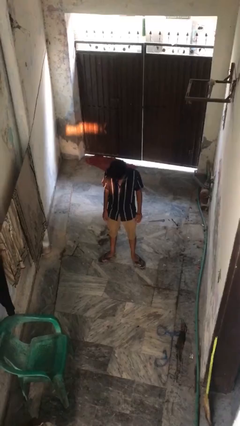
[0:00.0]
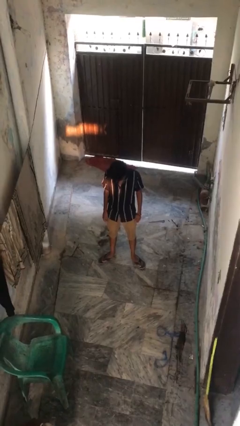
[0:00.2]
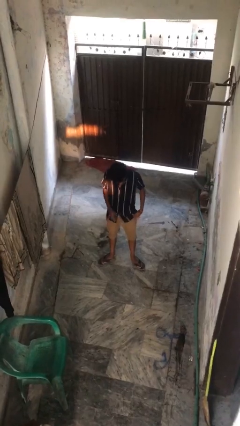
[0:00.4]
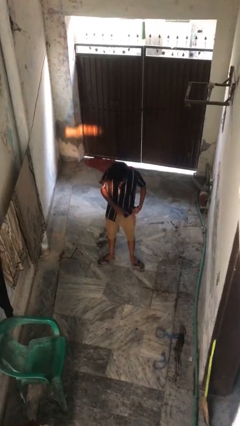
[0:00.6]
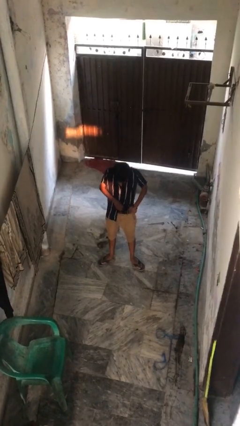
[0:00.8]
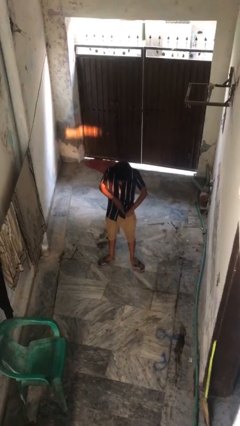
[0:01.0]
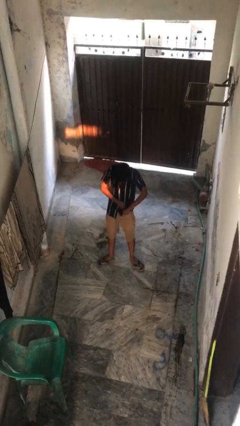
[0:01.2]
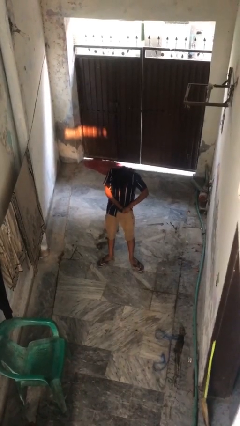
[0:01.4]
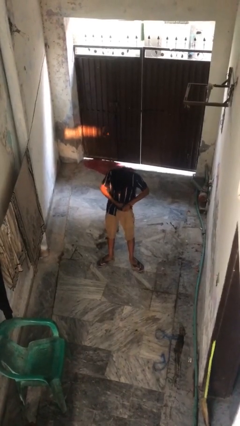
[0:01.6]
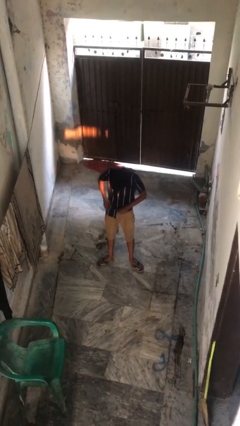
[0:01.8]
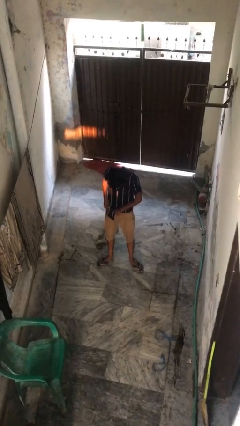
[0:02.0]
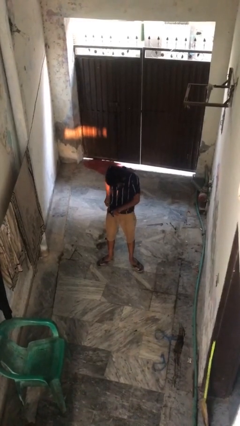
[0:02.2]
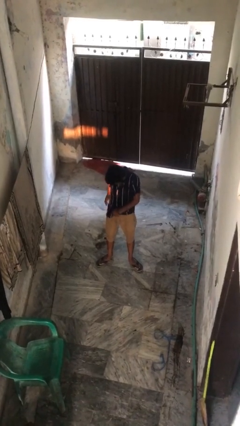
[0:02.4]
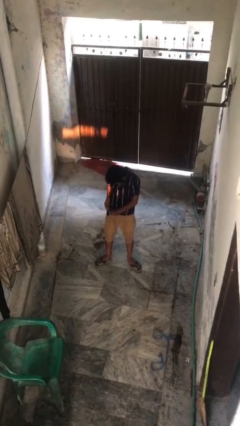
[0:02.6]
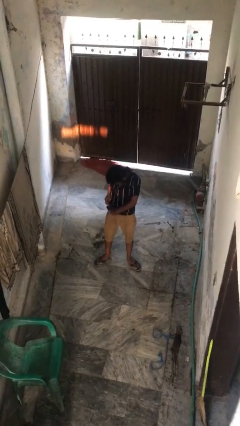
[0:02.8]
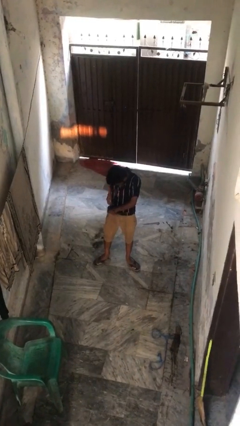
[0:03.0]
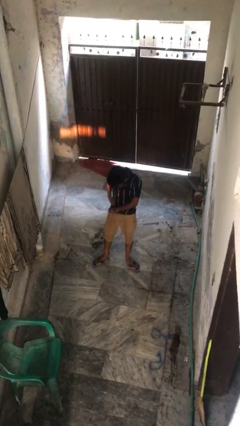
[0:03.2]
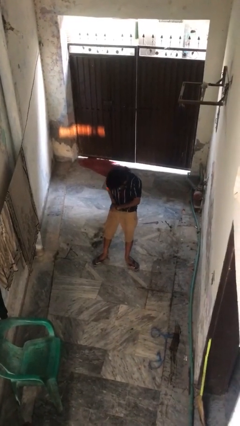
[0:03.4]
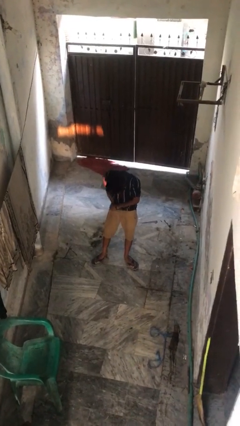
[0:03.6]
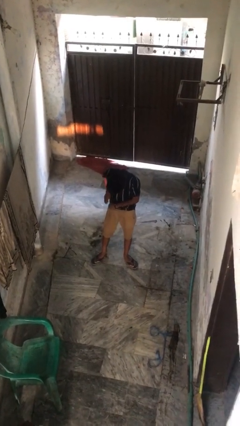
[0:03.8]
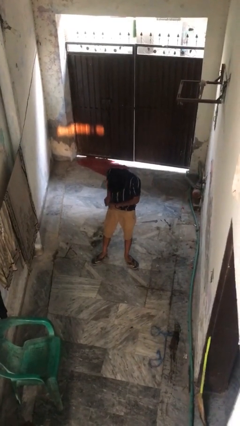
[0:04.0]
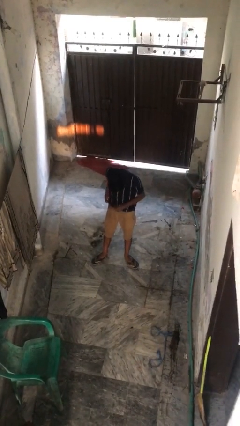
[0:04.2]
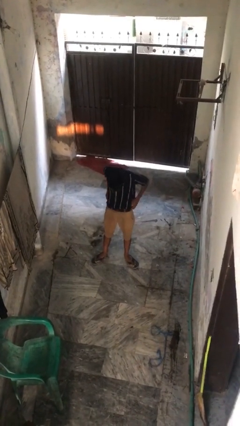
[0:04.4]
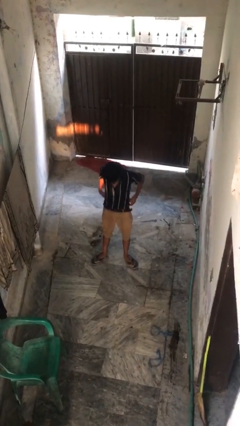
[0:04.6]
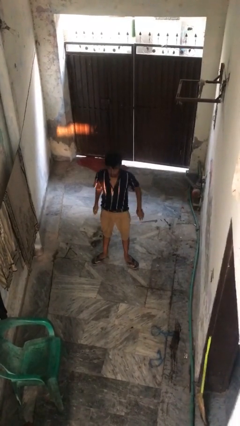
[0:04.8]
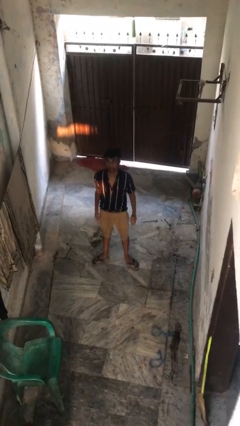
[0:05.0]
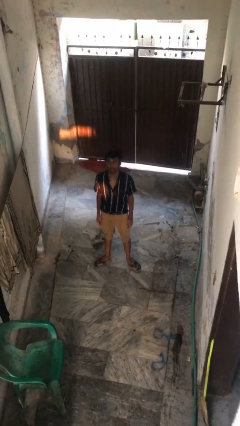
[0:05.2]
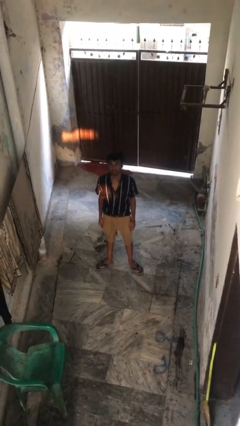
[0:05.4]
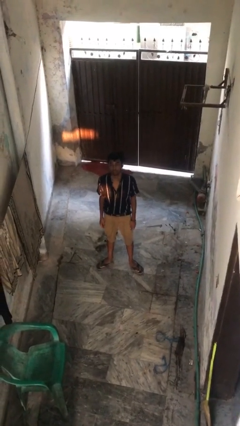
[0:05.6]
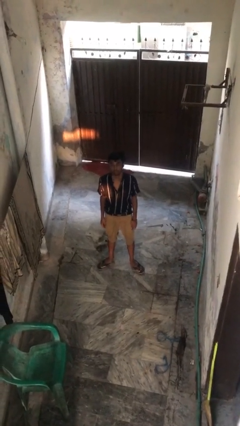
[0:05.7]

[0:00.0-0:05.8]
person tucks in shirt

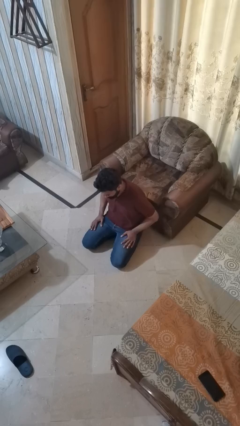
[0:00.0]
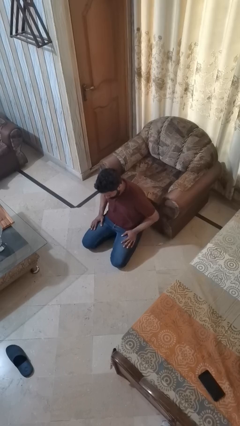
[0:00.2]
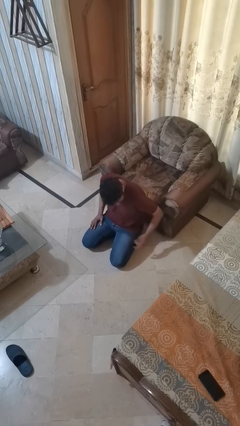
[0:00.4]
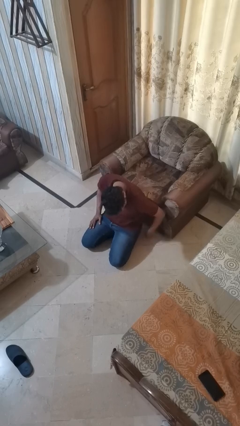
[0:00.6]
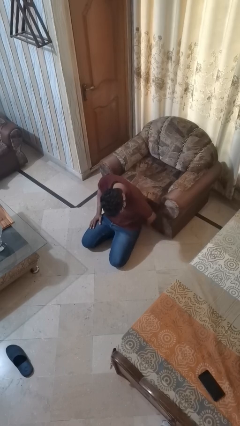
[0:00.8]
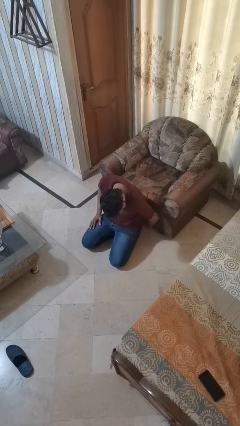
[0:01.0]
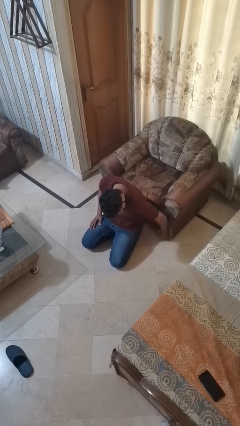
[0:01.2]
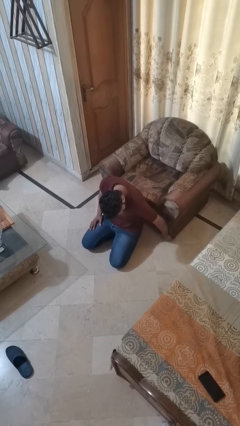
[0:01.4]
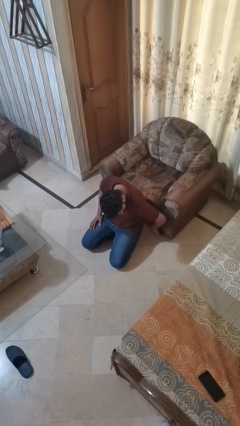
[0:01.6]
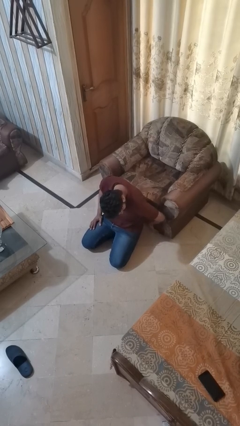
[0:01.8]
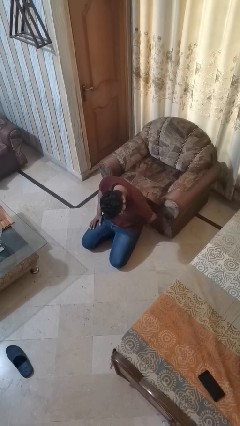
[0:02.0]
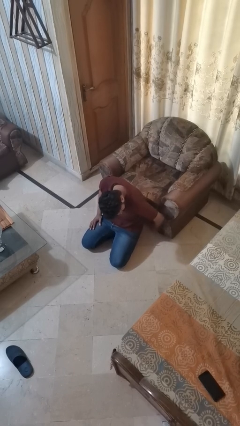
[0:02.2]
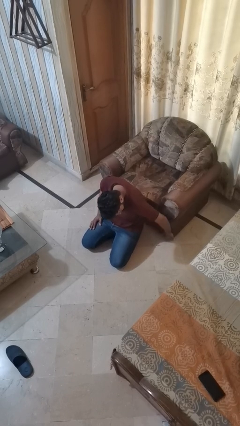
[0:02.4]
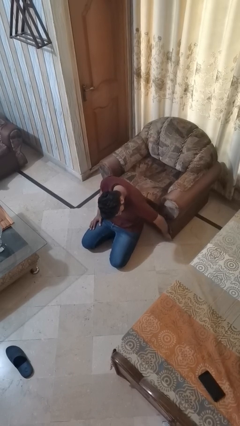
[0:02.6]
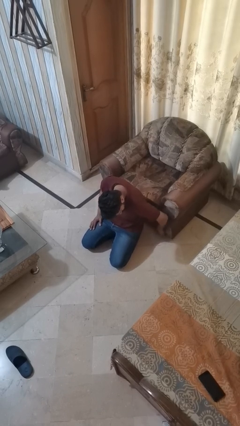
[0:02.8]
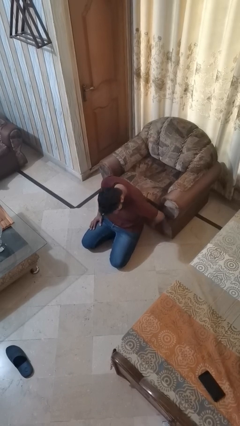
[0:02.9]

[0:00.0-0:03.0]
person searches under couch

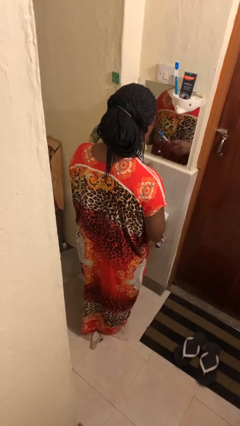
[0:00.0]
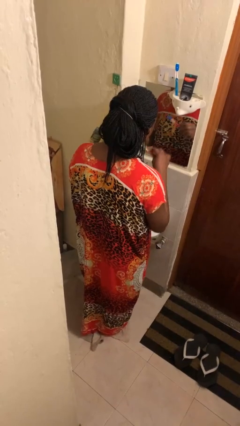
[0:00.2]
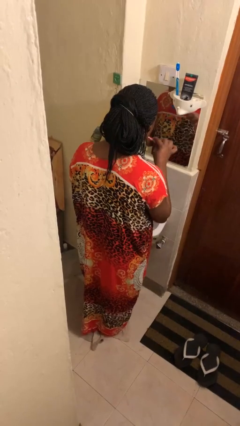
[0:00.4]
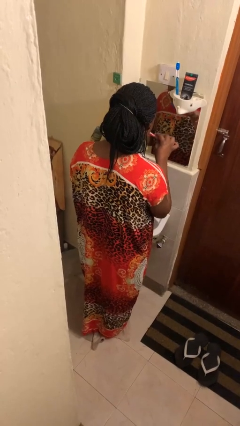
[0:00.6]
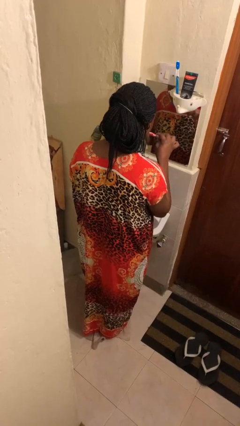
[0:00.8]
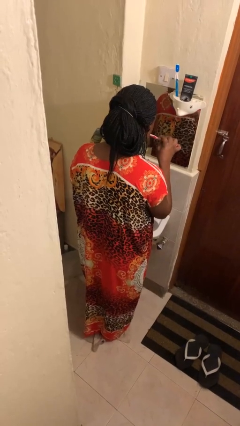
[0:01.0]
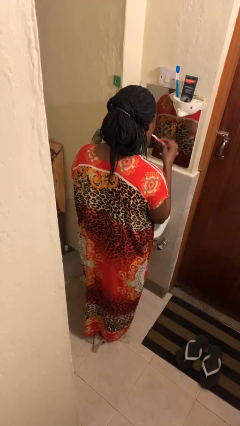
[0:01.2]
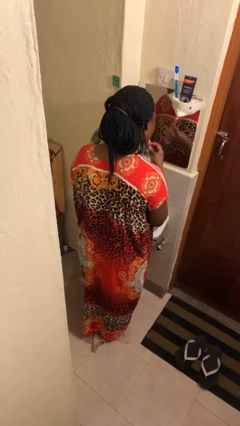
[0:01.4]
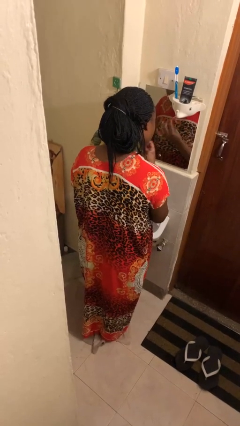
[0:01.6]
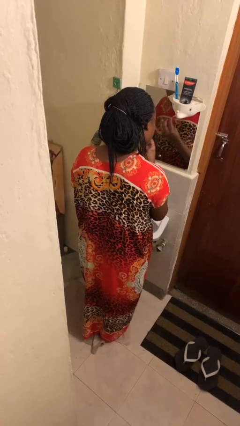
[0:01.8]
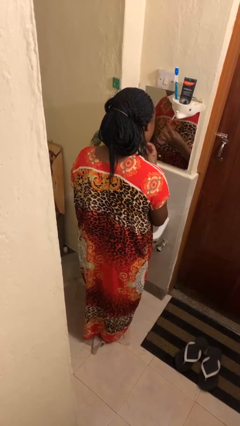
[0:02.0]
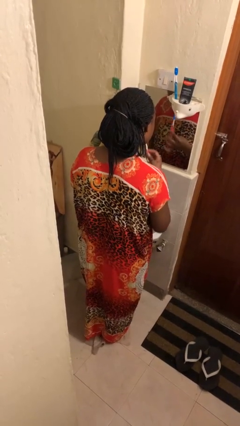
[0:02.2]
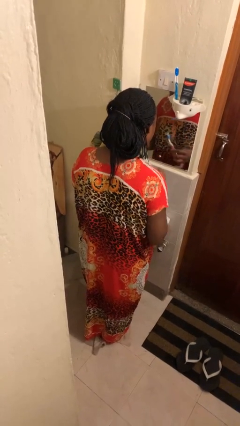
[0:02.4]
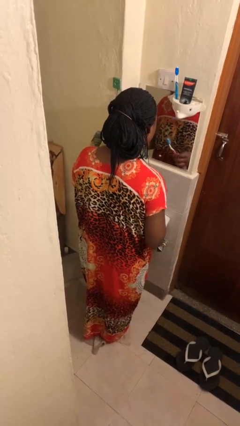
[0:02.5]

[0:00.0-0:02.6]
person brushes teeth

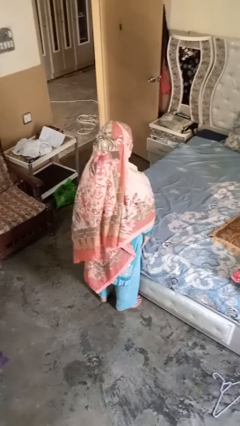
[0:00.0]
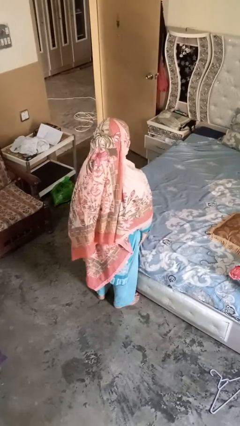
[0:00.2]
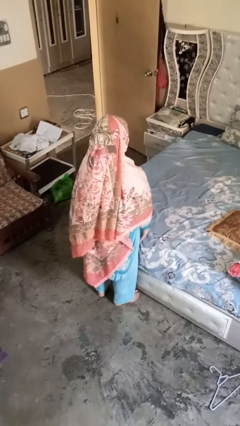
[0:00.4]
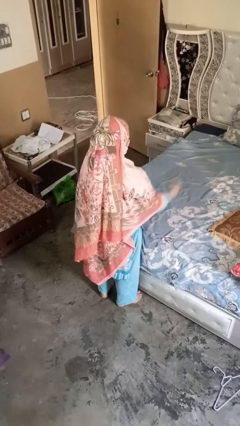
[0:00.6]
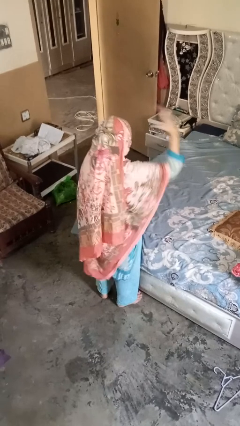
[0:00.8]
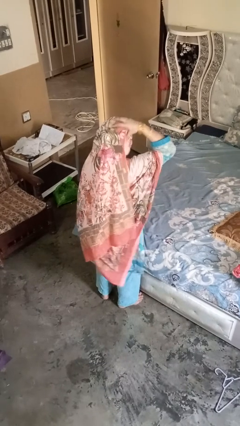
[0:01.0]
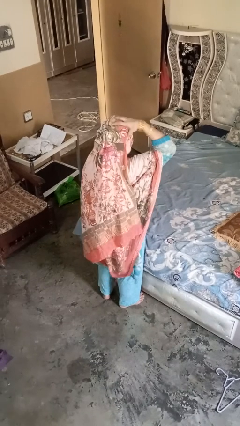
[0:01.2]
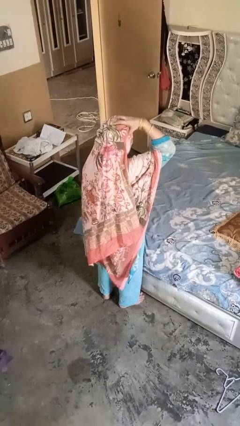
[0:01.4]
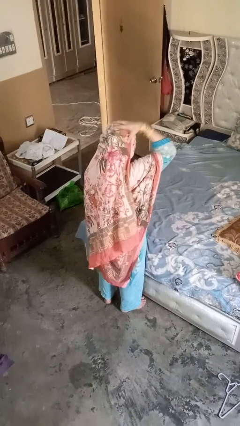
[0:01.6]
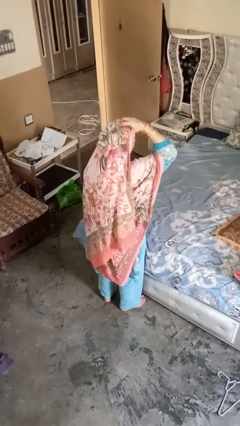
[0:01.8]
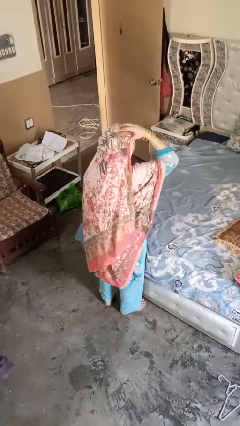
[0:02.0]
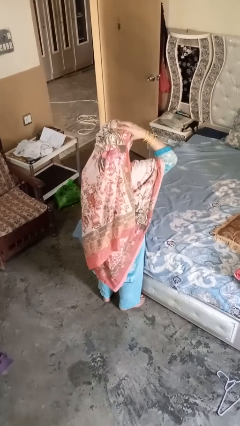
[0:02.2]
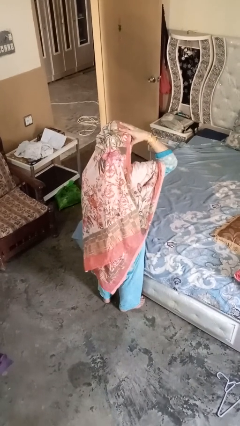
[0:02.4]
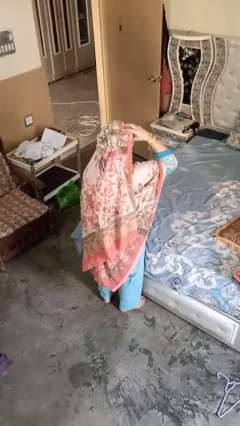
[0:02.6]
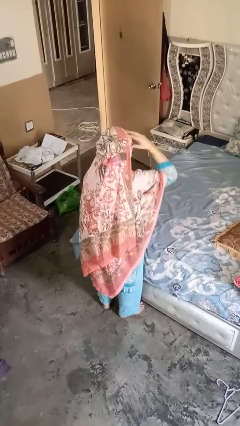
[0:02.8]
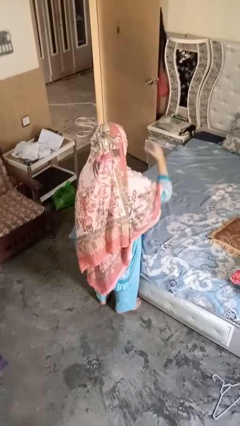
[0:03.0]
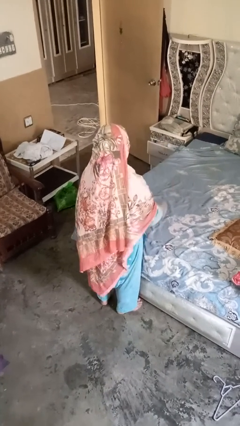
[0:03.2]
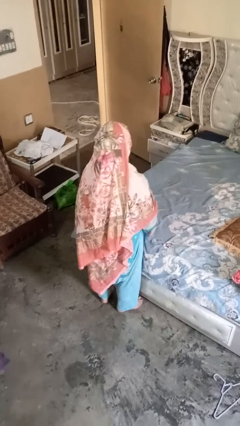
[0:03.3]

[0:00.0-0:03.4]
person strokes hair

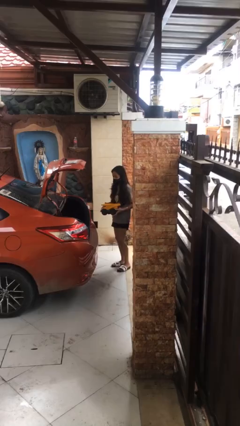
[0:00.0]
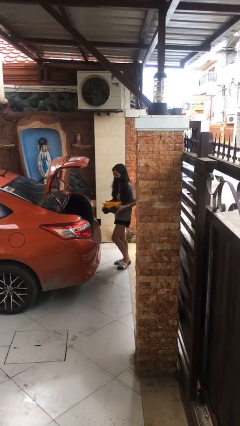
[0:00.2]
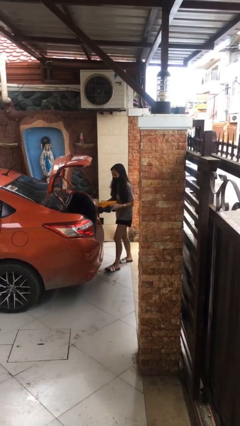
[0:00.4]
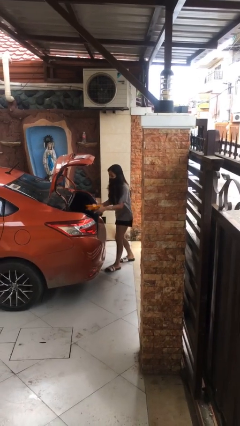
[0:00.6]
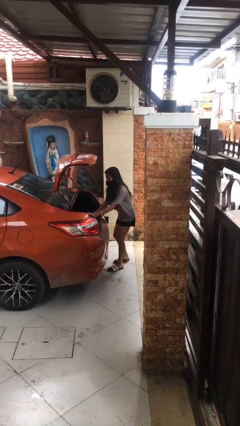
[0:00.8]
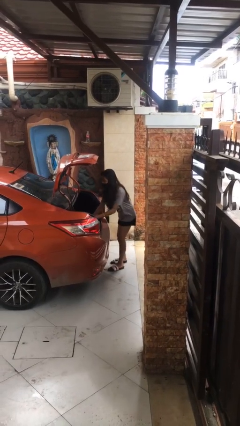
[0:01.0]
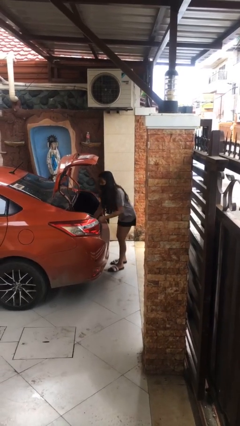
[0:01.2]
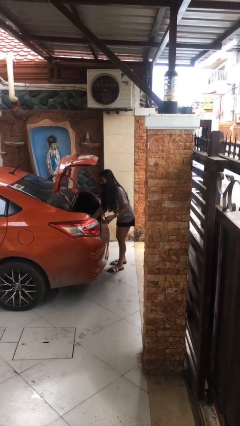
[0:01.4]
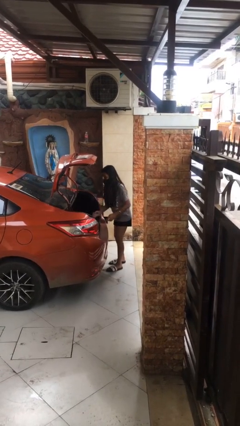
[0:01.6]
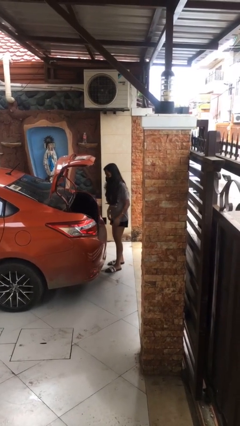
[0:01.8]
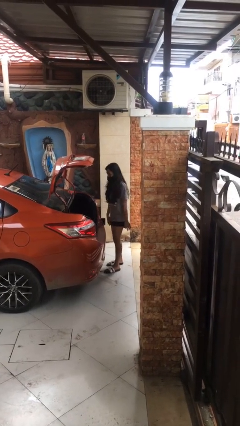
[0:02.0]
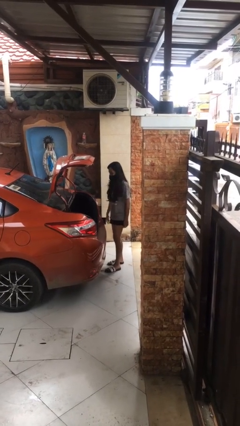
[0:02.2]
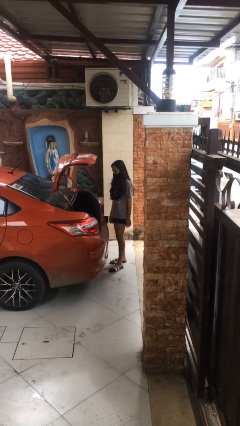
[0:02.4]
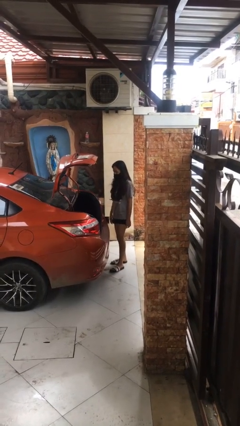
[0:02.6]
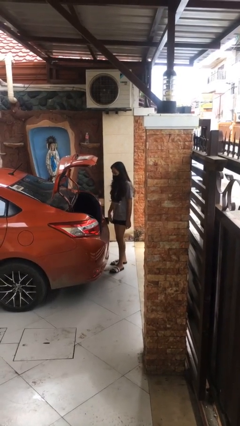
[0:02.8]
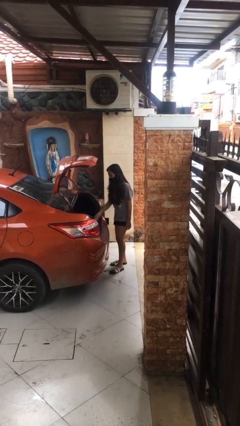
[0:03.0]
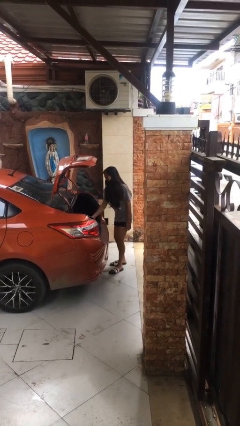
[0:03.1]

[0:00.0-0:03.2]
person loads car

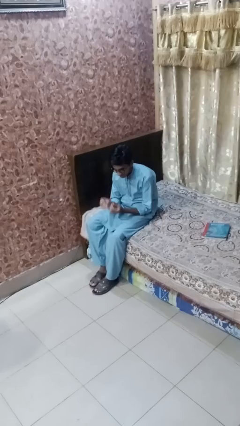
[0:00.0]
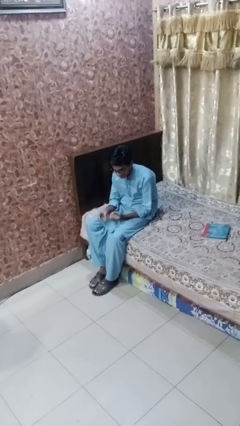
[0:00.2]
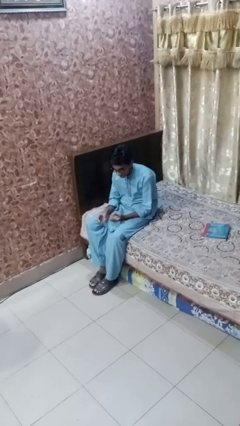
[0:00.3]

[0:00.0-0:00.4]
person clips fingernails
